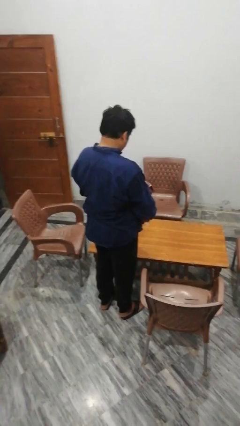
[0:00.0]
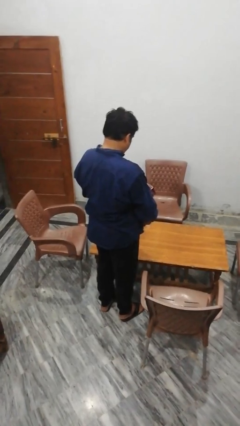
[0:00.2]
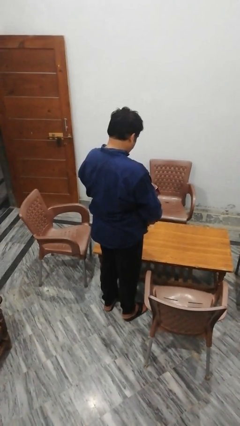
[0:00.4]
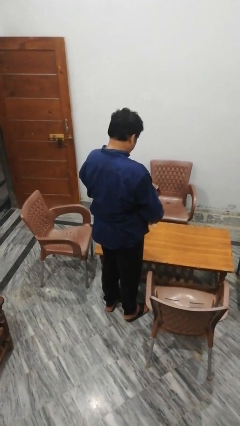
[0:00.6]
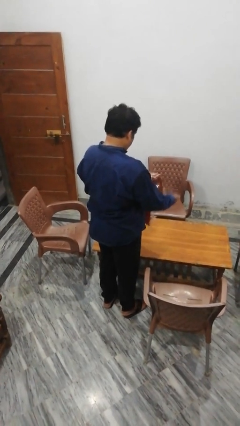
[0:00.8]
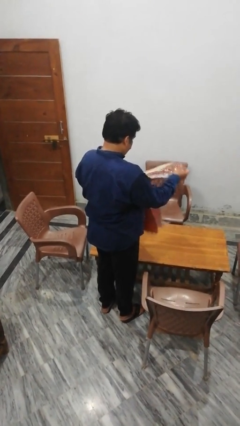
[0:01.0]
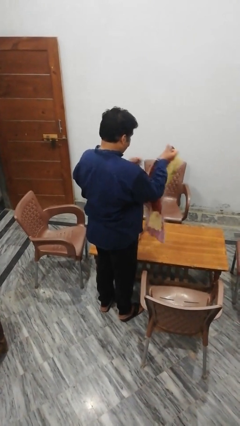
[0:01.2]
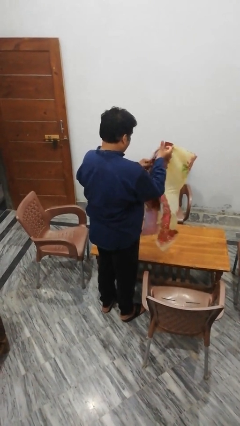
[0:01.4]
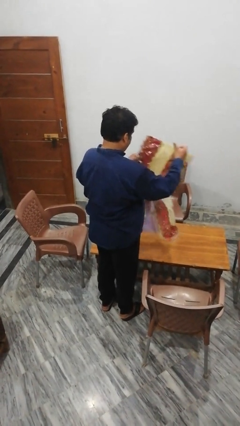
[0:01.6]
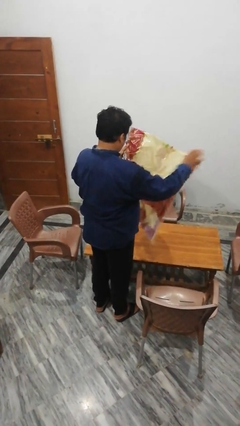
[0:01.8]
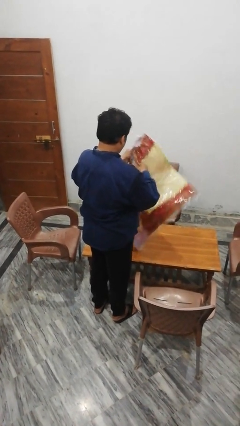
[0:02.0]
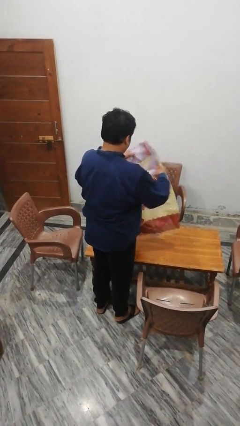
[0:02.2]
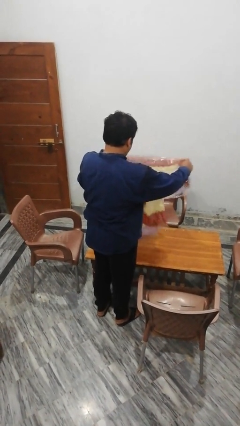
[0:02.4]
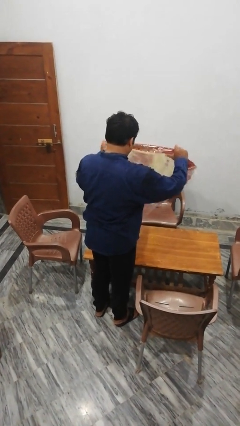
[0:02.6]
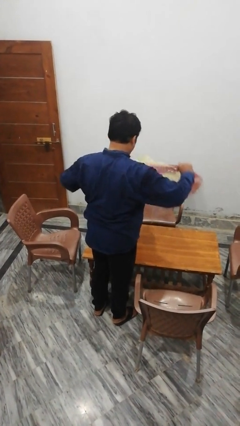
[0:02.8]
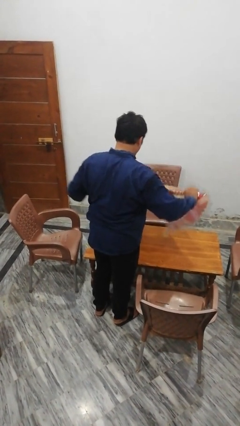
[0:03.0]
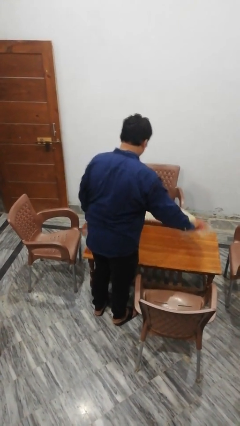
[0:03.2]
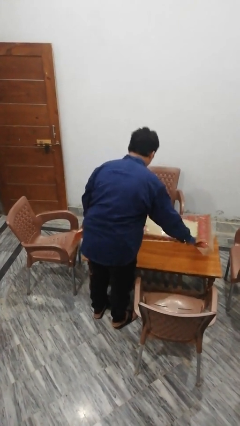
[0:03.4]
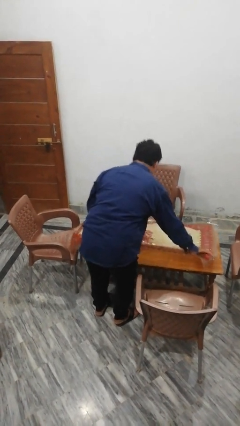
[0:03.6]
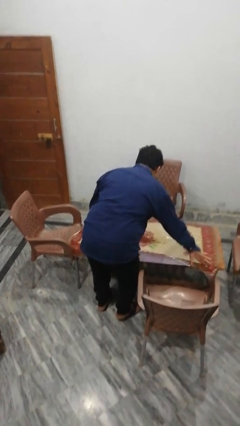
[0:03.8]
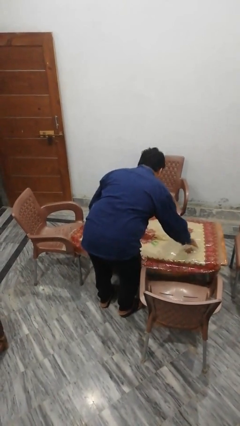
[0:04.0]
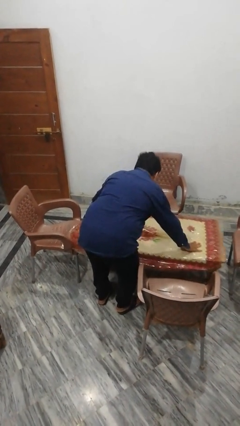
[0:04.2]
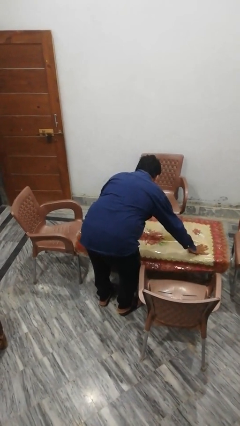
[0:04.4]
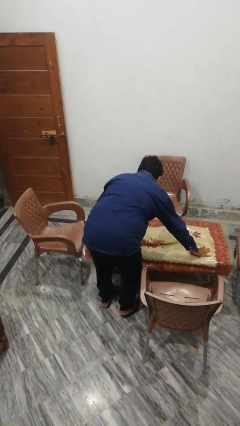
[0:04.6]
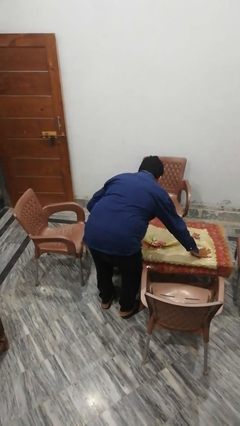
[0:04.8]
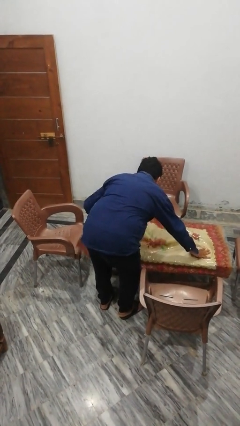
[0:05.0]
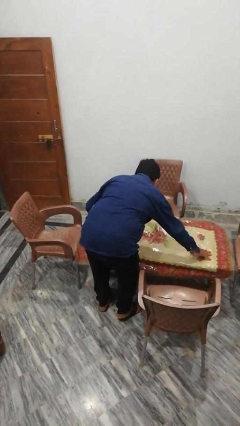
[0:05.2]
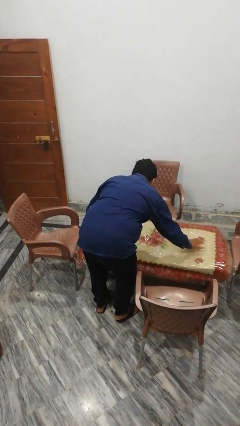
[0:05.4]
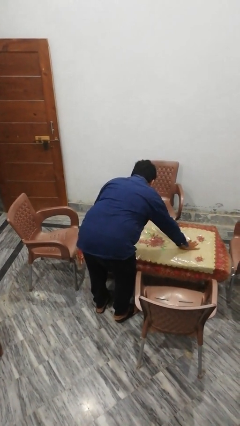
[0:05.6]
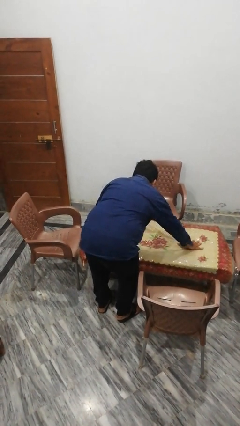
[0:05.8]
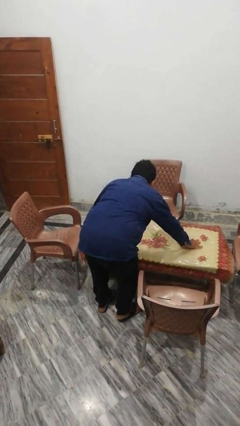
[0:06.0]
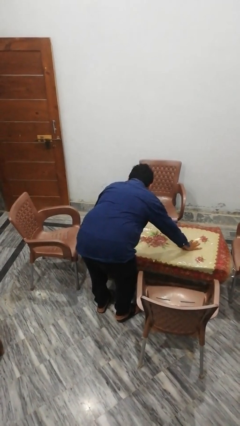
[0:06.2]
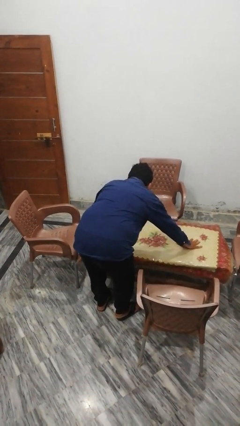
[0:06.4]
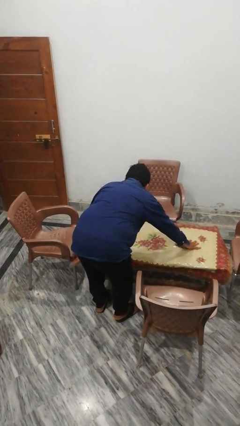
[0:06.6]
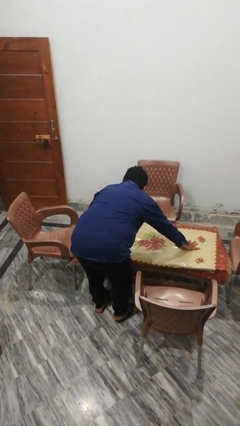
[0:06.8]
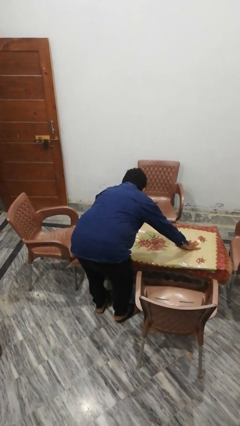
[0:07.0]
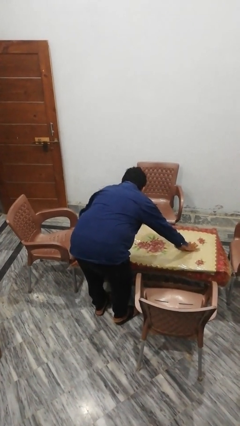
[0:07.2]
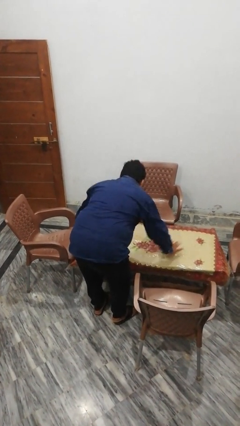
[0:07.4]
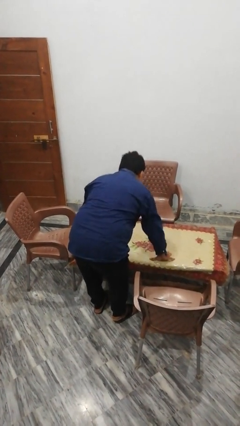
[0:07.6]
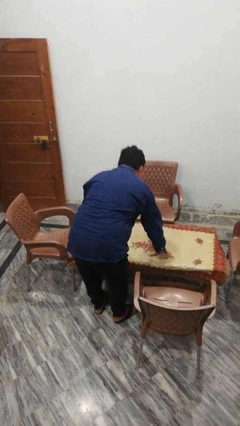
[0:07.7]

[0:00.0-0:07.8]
person spreads tablecloth

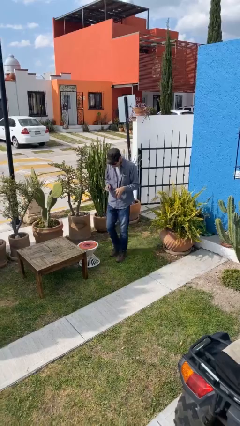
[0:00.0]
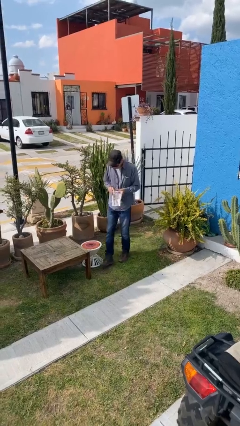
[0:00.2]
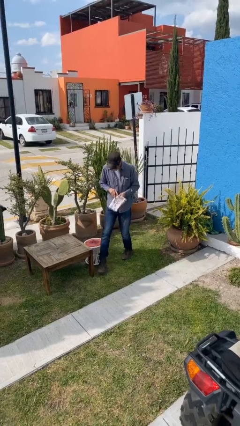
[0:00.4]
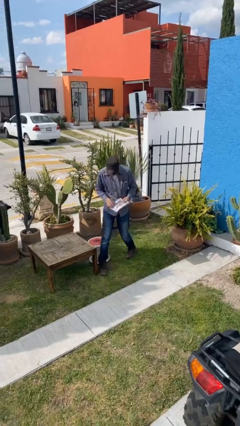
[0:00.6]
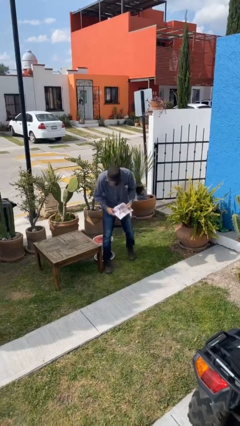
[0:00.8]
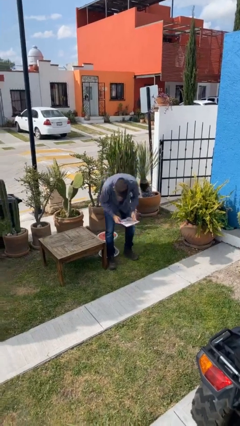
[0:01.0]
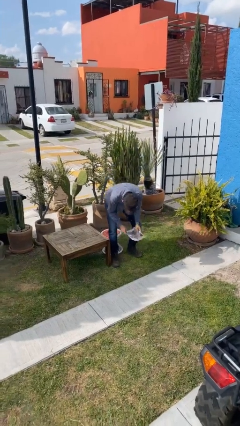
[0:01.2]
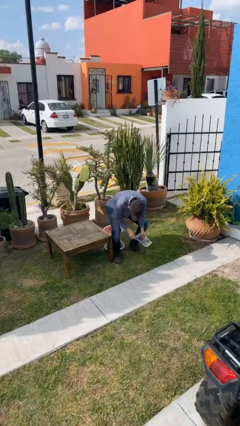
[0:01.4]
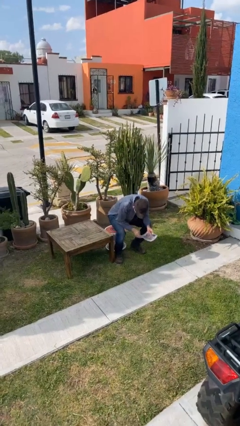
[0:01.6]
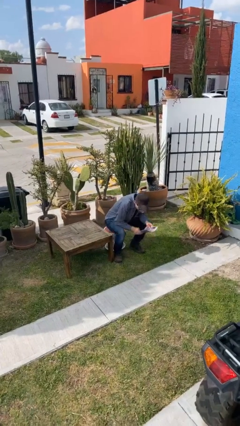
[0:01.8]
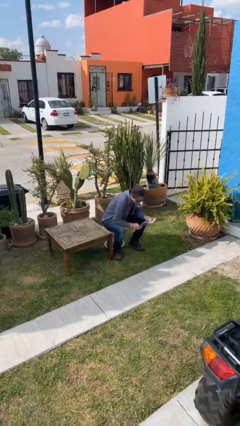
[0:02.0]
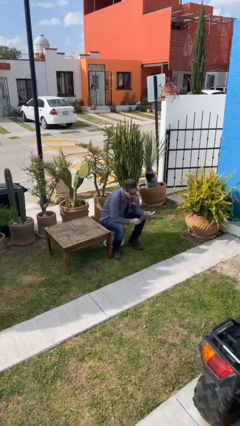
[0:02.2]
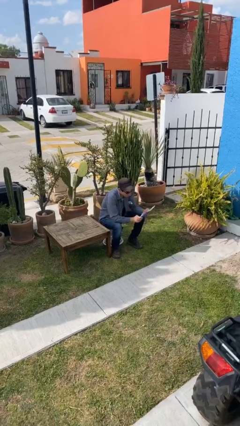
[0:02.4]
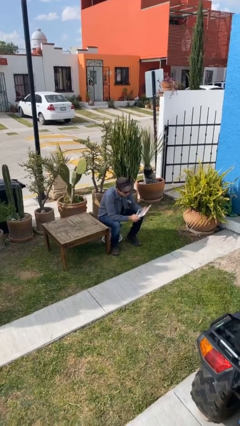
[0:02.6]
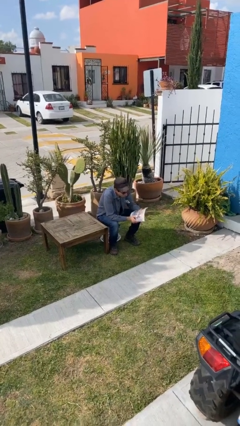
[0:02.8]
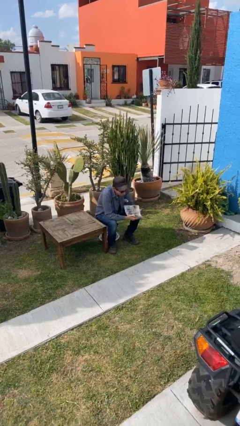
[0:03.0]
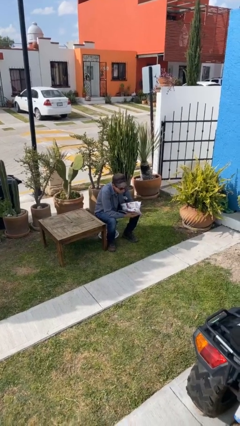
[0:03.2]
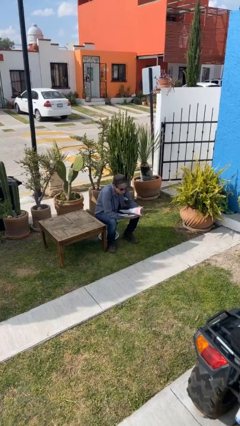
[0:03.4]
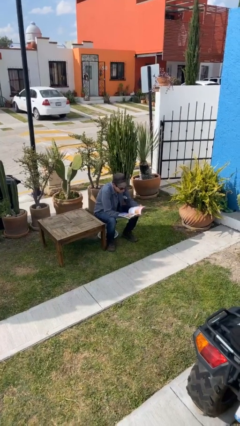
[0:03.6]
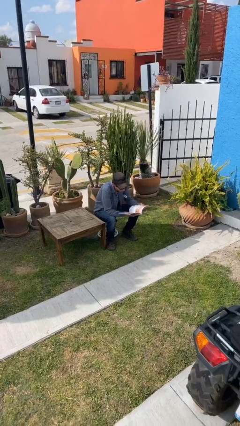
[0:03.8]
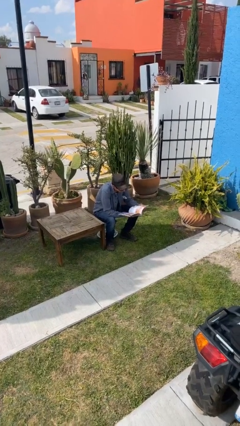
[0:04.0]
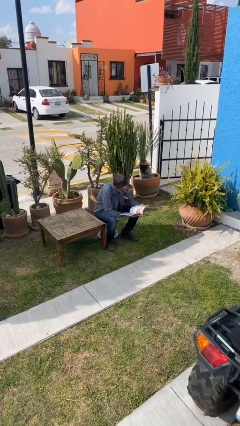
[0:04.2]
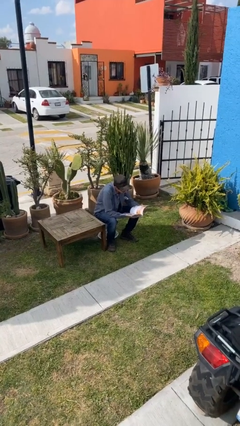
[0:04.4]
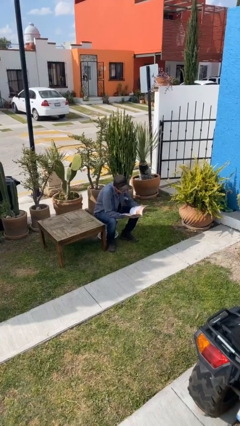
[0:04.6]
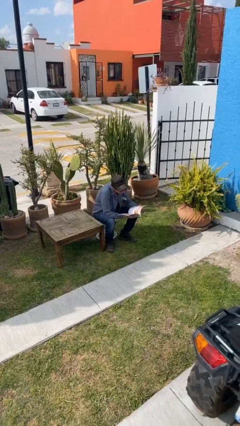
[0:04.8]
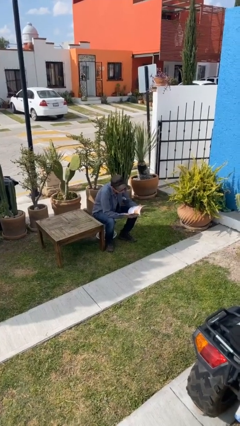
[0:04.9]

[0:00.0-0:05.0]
person sits down

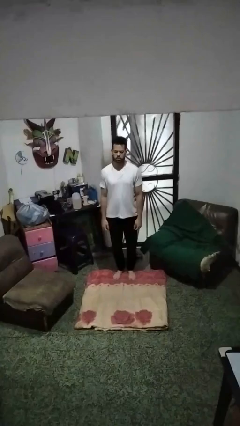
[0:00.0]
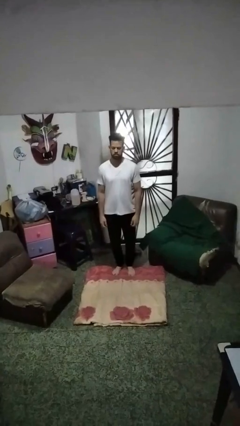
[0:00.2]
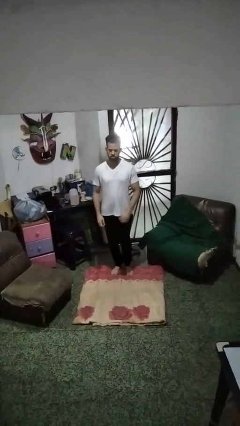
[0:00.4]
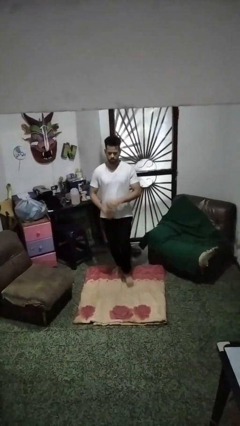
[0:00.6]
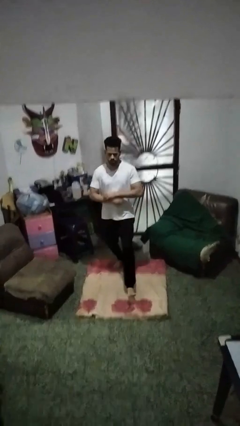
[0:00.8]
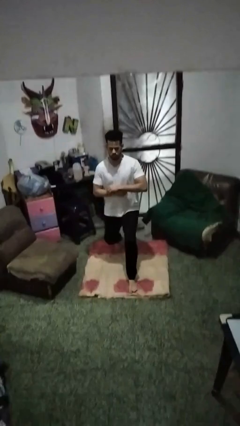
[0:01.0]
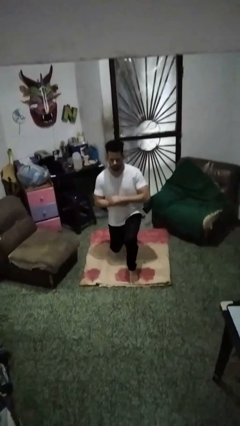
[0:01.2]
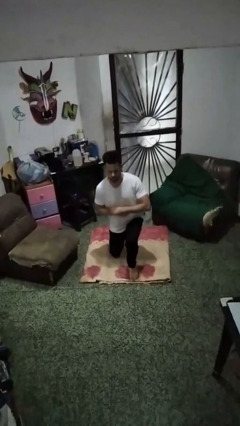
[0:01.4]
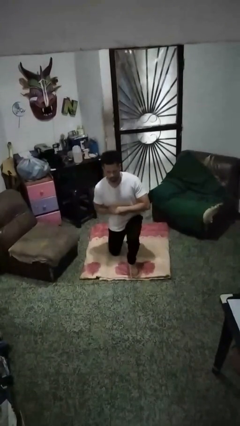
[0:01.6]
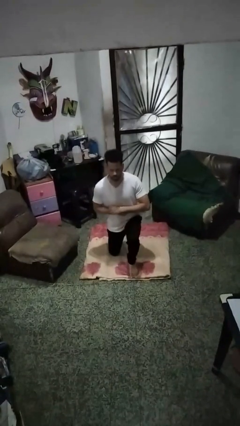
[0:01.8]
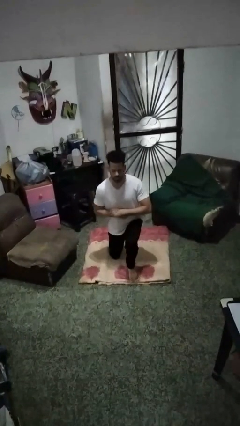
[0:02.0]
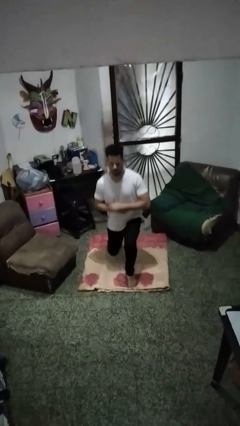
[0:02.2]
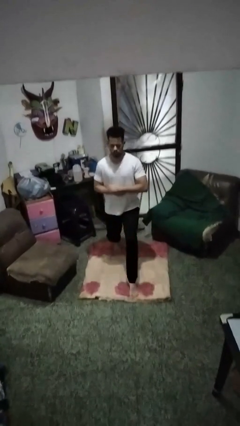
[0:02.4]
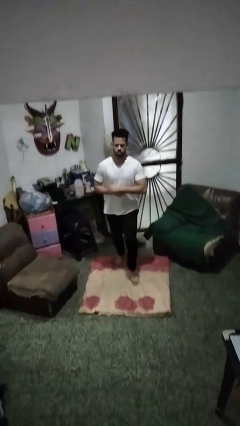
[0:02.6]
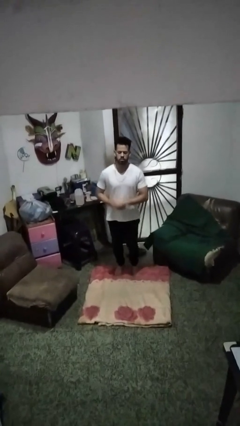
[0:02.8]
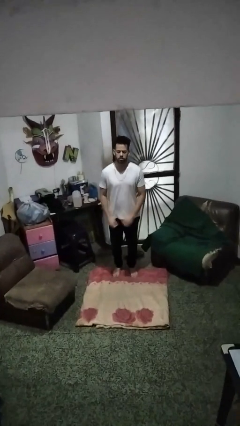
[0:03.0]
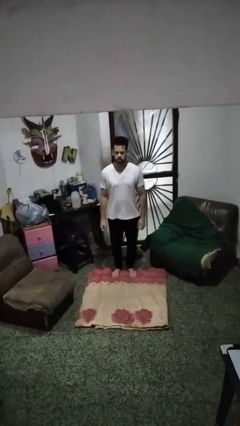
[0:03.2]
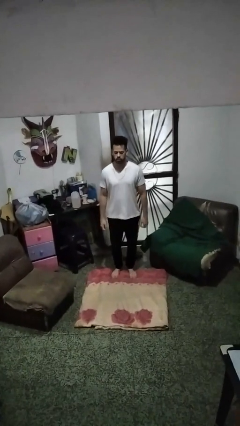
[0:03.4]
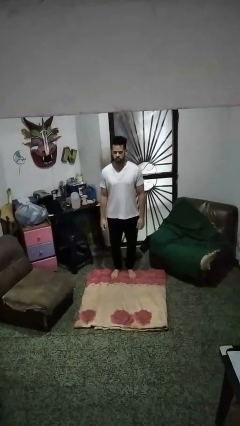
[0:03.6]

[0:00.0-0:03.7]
person exercises with lunges

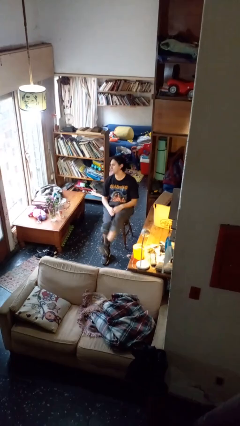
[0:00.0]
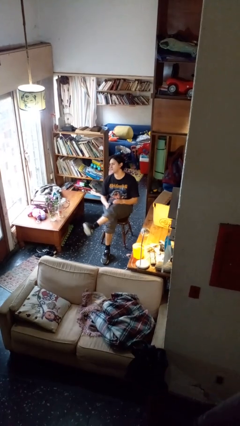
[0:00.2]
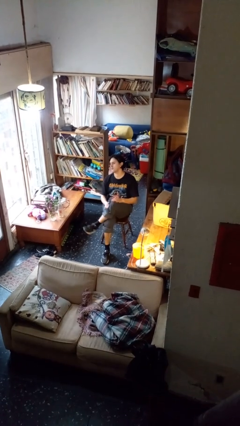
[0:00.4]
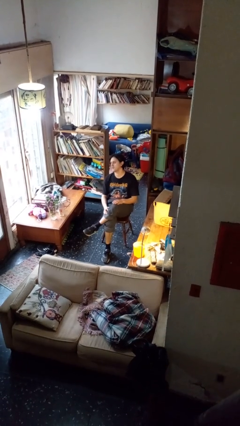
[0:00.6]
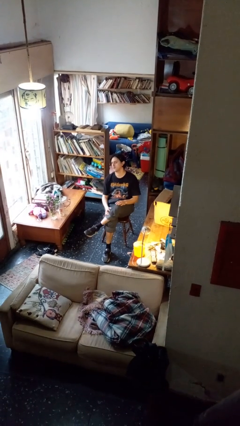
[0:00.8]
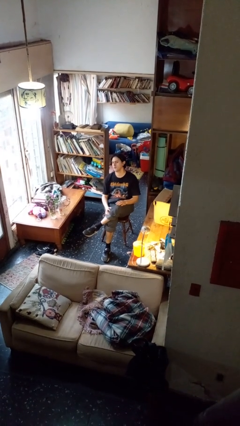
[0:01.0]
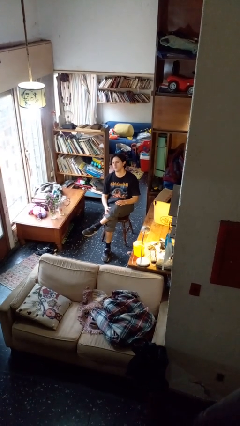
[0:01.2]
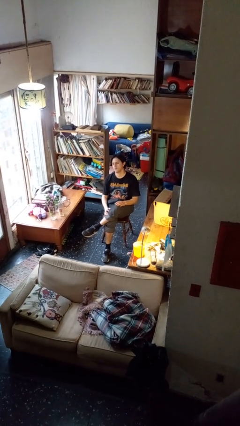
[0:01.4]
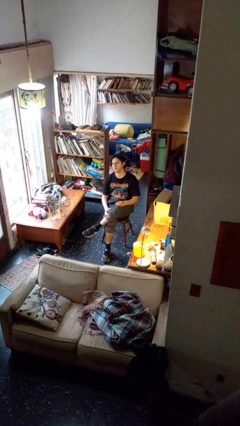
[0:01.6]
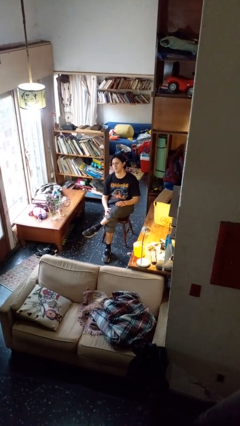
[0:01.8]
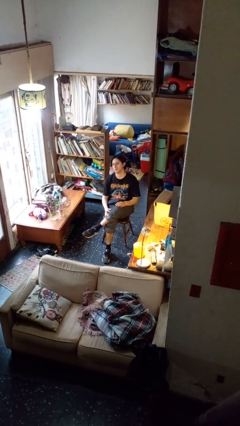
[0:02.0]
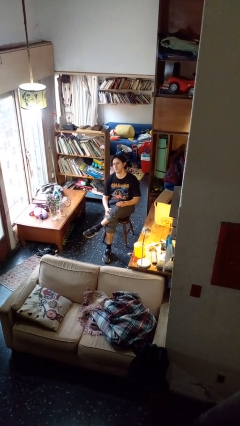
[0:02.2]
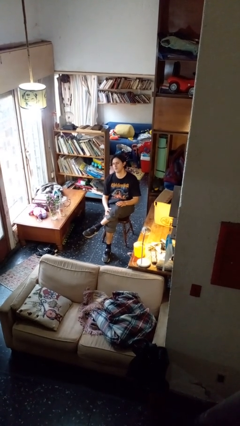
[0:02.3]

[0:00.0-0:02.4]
person crosses legs
